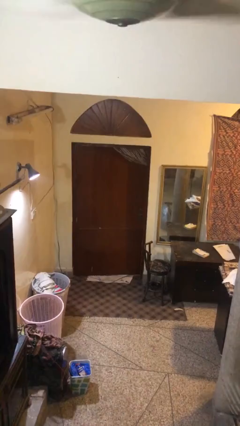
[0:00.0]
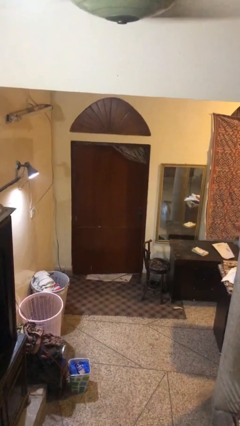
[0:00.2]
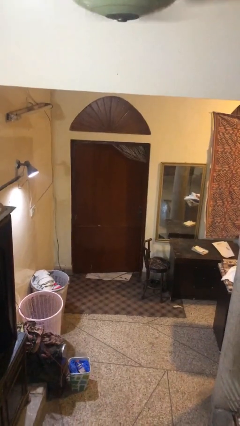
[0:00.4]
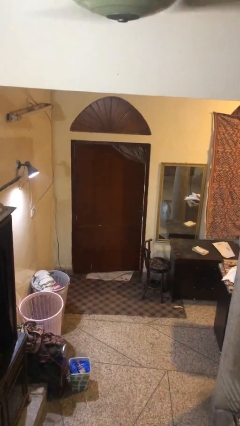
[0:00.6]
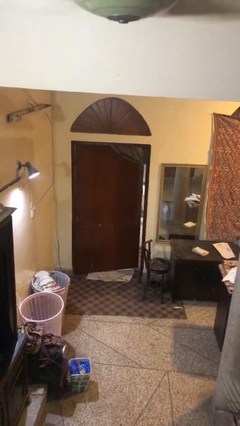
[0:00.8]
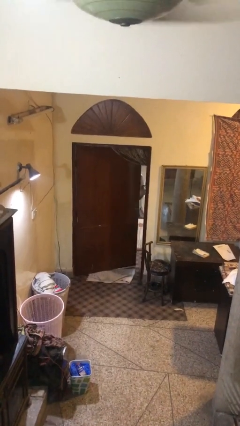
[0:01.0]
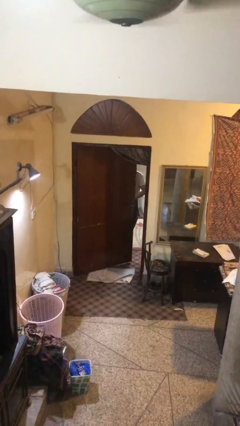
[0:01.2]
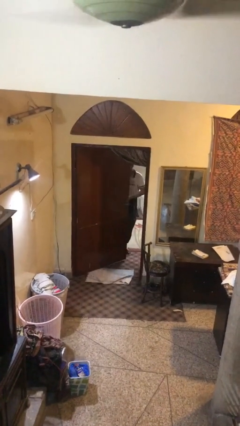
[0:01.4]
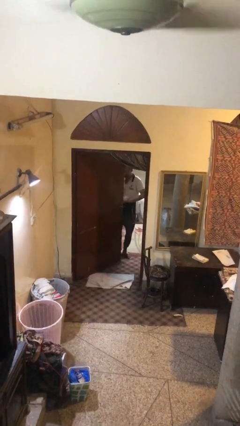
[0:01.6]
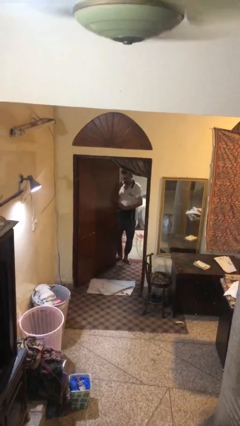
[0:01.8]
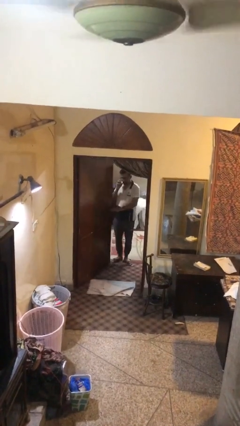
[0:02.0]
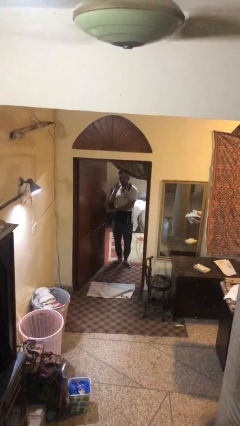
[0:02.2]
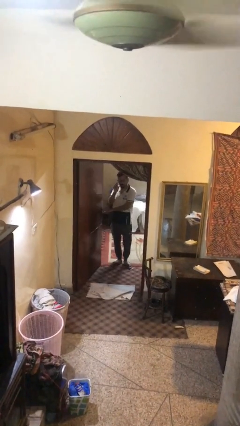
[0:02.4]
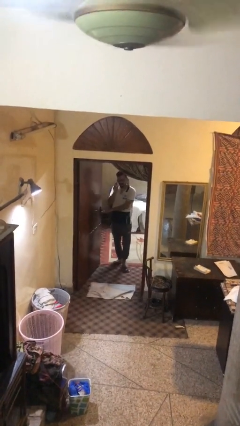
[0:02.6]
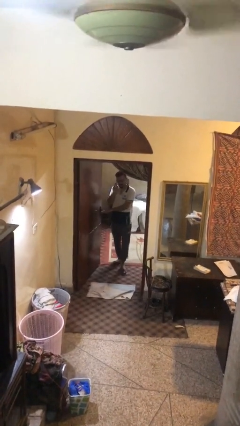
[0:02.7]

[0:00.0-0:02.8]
person opens facility door

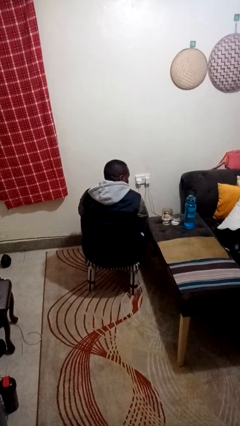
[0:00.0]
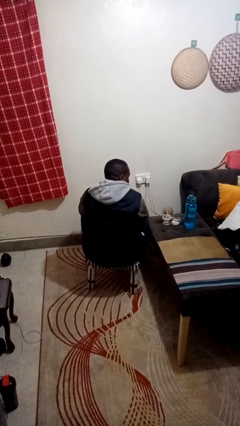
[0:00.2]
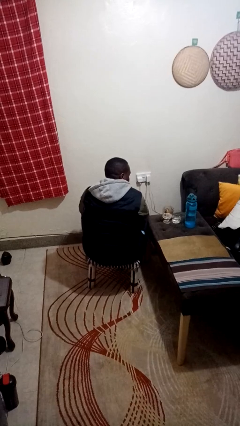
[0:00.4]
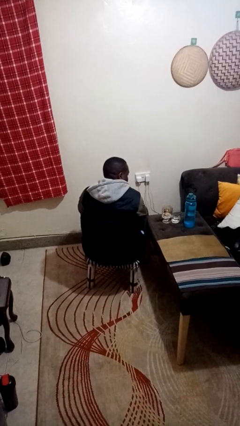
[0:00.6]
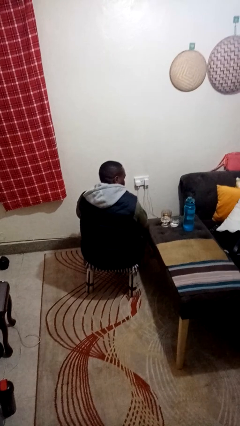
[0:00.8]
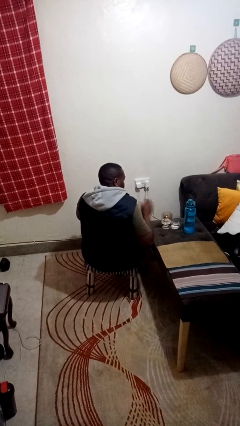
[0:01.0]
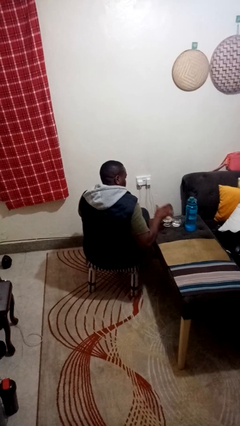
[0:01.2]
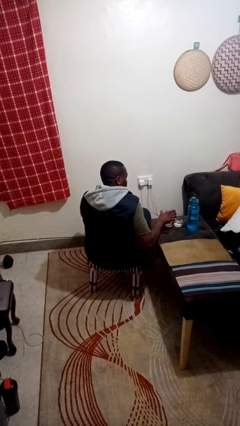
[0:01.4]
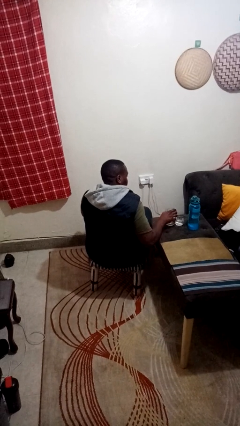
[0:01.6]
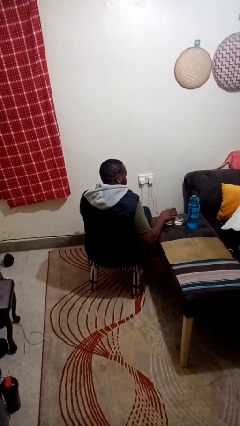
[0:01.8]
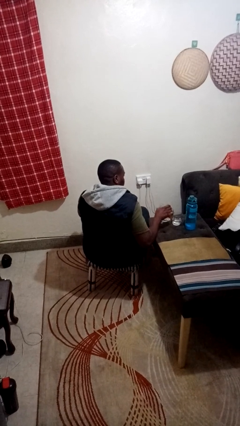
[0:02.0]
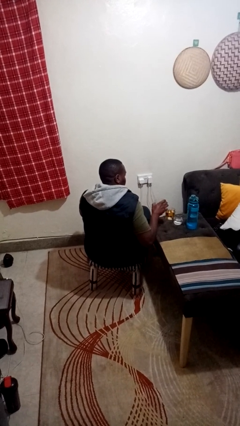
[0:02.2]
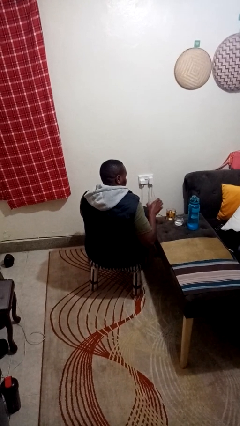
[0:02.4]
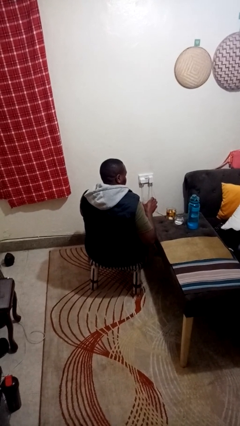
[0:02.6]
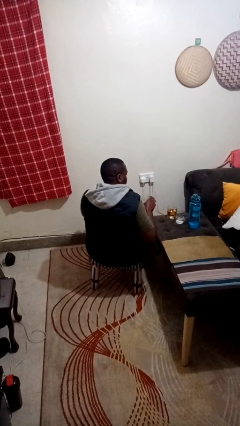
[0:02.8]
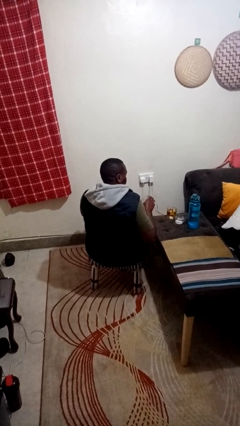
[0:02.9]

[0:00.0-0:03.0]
person picks up object from table

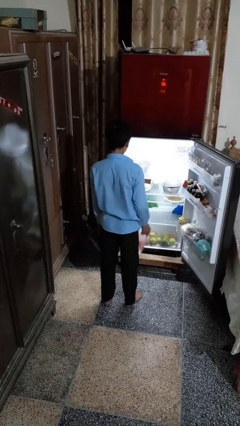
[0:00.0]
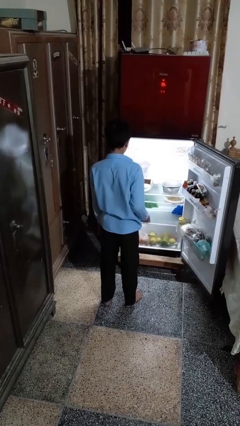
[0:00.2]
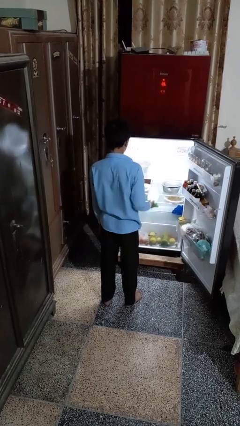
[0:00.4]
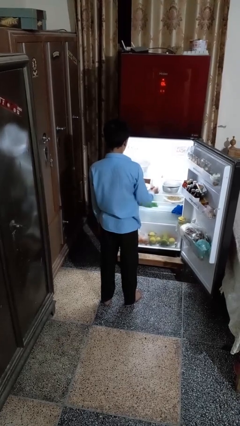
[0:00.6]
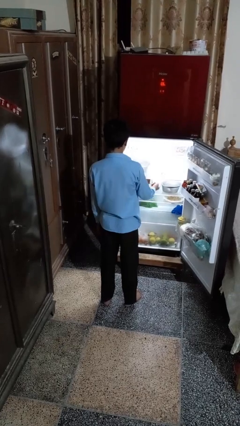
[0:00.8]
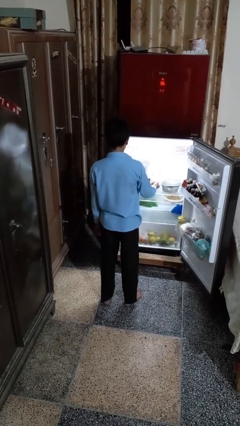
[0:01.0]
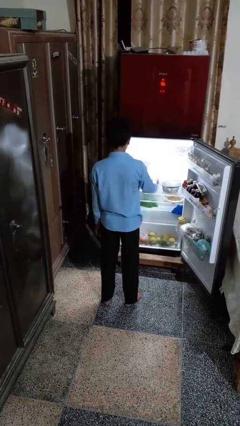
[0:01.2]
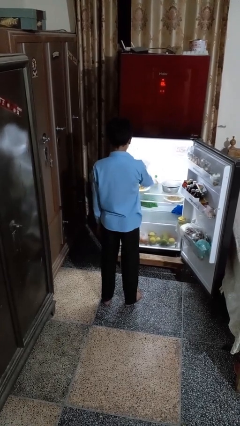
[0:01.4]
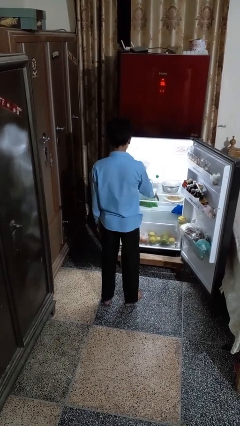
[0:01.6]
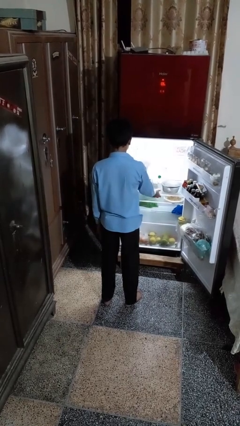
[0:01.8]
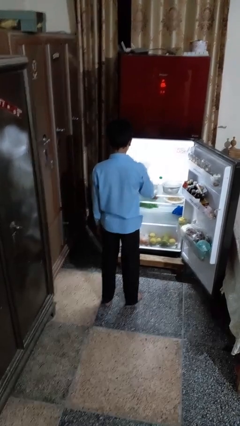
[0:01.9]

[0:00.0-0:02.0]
person puts object into refrigerator

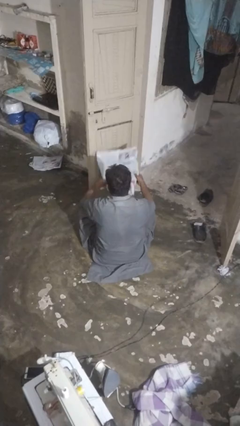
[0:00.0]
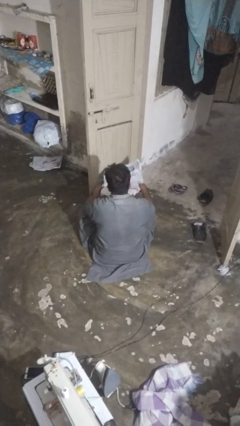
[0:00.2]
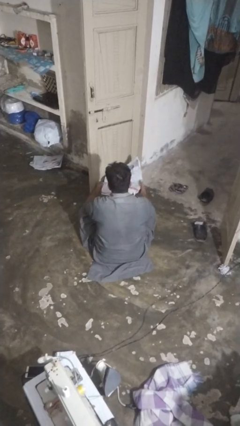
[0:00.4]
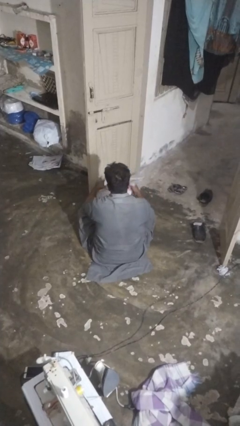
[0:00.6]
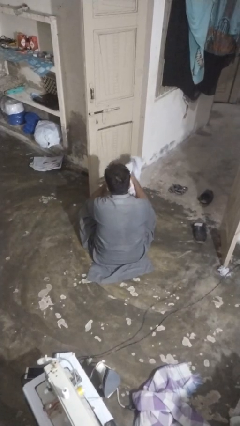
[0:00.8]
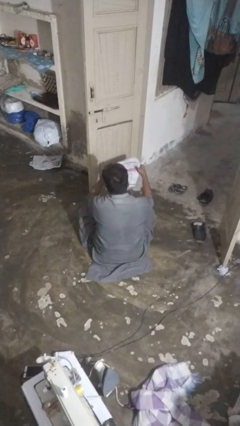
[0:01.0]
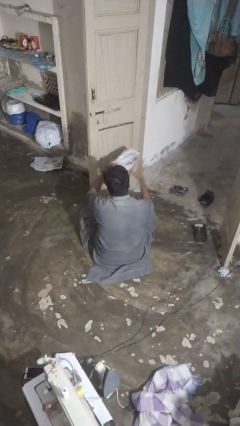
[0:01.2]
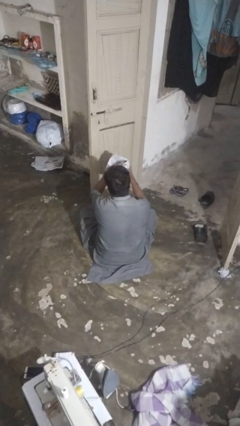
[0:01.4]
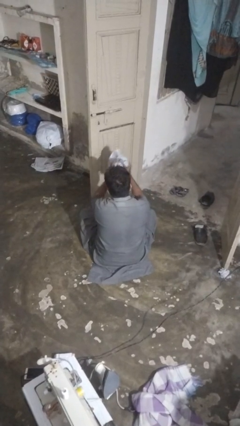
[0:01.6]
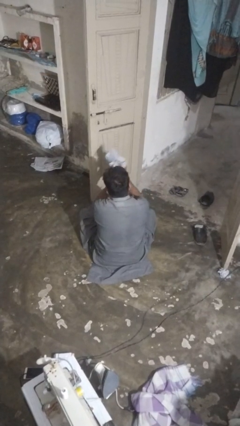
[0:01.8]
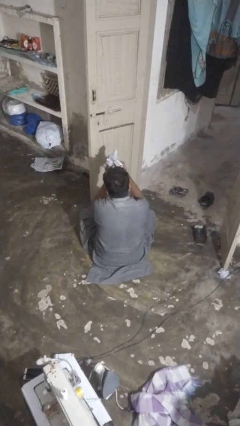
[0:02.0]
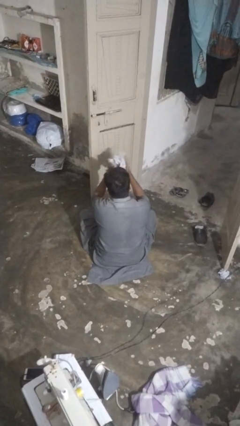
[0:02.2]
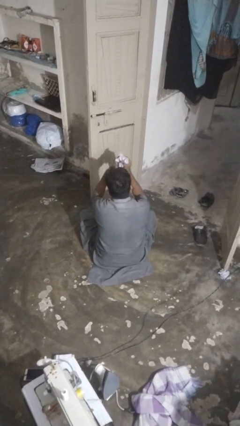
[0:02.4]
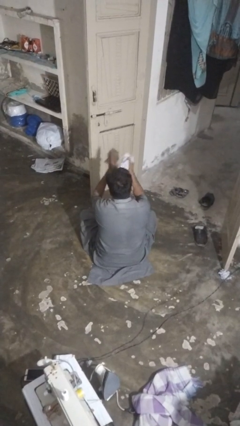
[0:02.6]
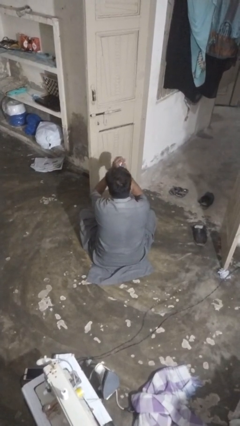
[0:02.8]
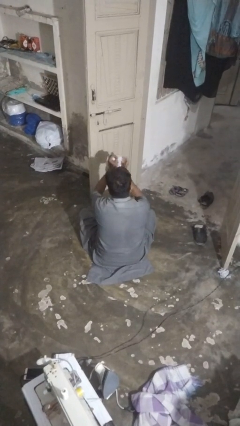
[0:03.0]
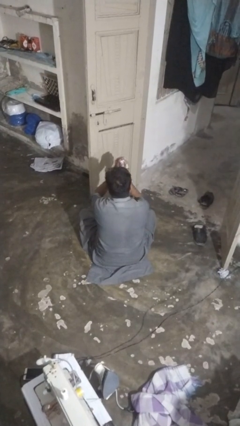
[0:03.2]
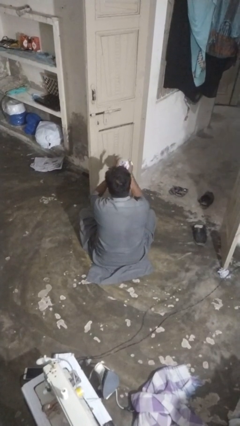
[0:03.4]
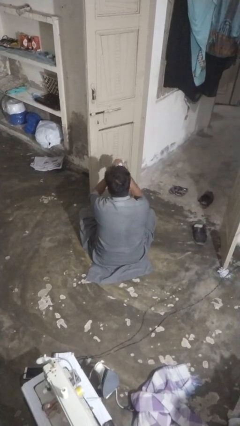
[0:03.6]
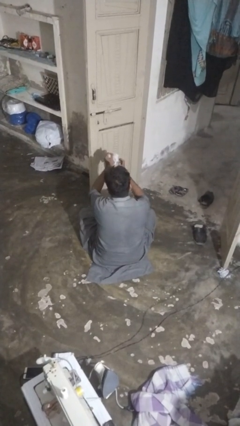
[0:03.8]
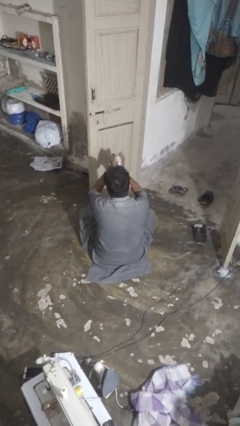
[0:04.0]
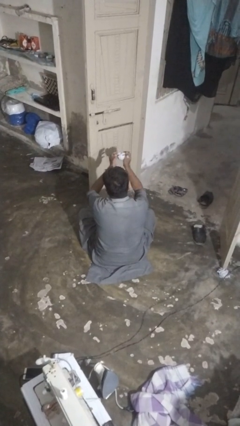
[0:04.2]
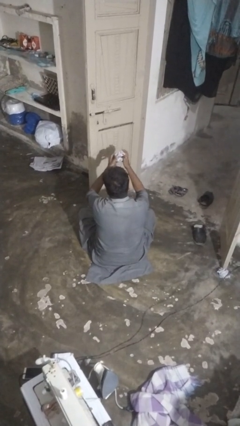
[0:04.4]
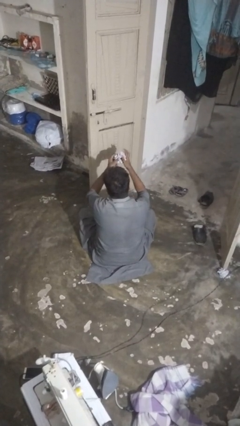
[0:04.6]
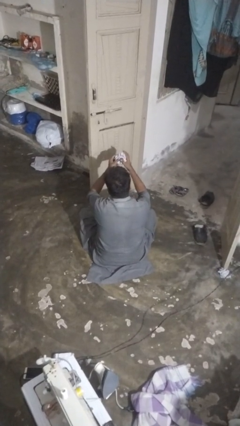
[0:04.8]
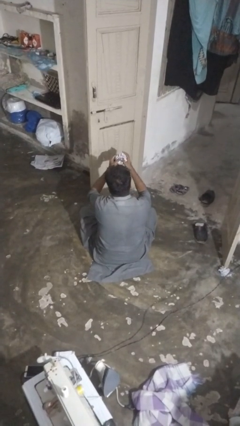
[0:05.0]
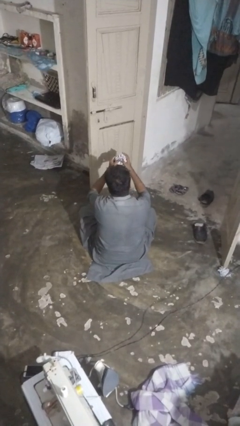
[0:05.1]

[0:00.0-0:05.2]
person crumples paper

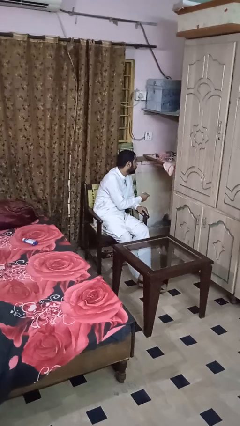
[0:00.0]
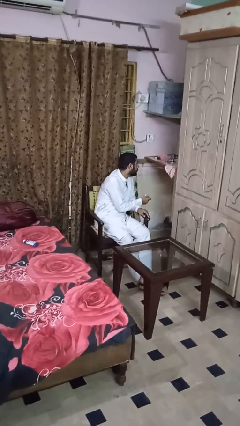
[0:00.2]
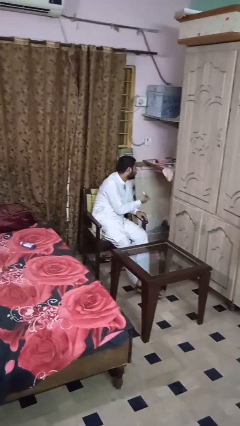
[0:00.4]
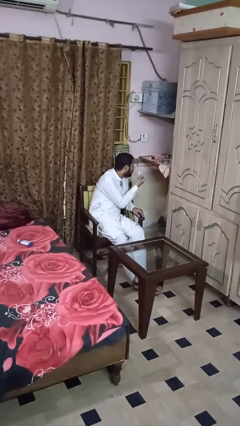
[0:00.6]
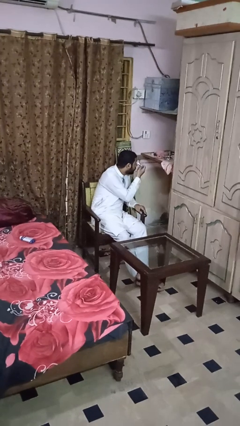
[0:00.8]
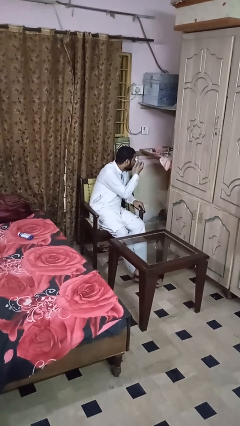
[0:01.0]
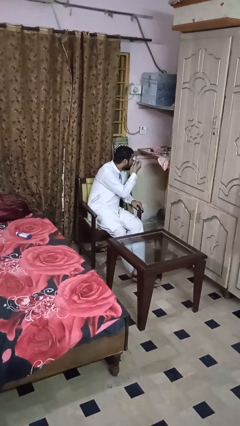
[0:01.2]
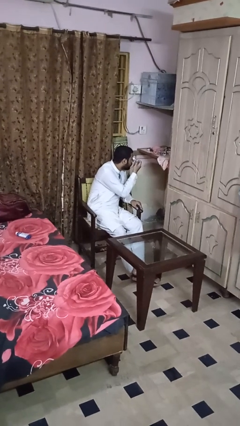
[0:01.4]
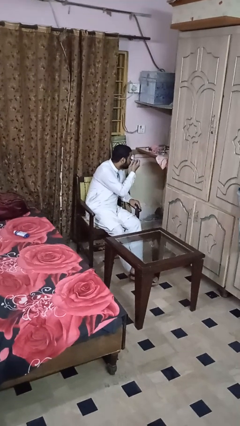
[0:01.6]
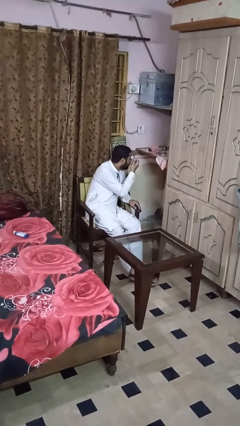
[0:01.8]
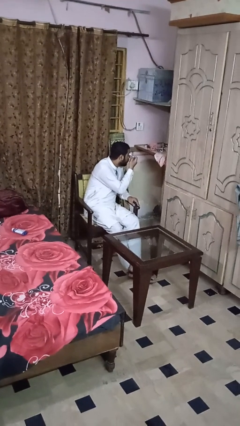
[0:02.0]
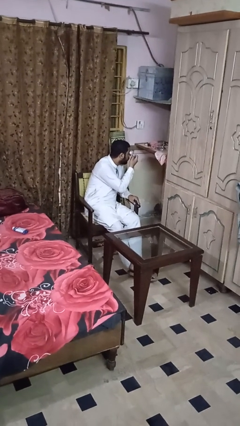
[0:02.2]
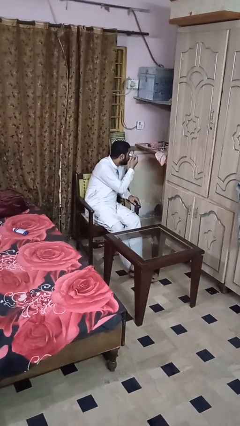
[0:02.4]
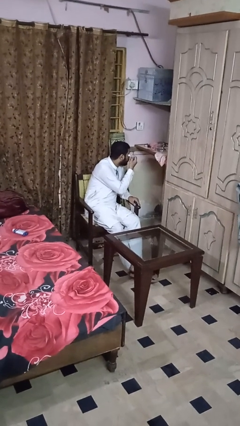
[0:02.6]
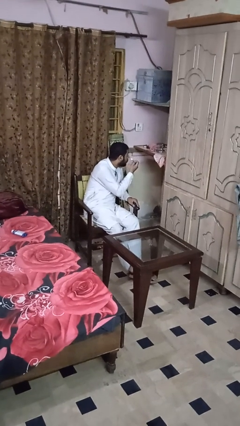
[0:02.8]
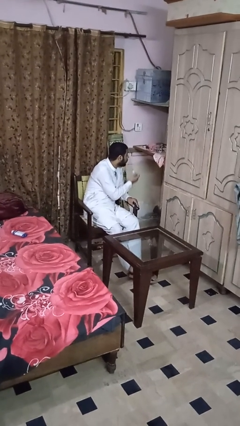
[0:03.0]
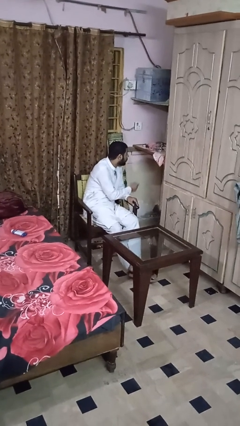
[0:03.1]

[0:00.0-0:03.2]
person applies eye makeup

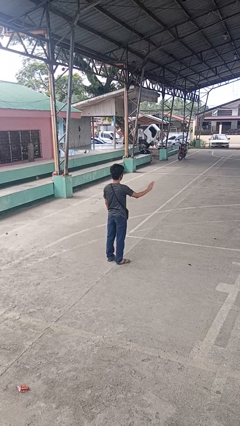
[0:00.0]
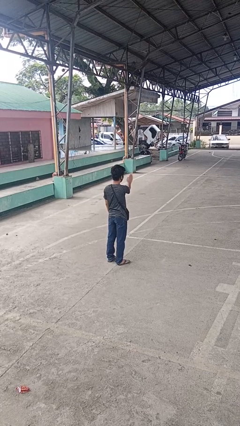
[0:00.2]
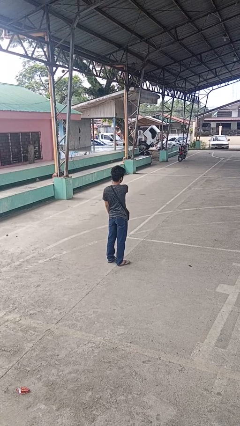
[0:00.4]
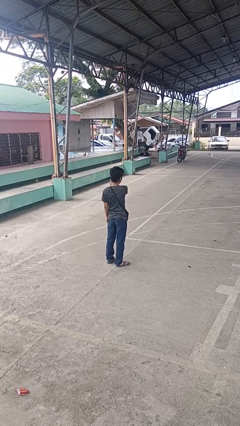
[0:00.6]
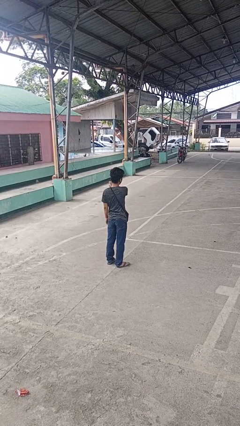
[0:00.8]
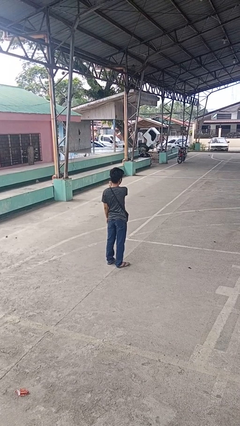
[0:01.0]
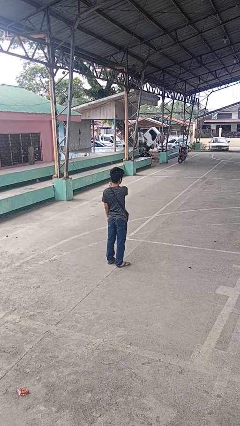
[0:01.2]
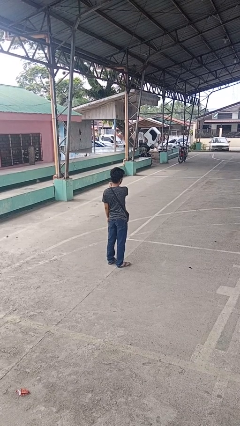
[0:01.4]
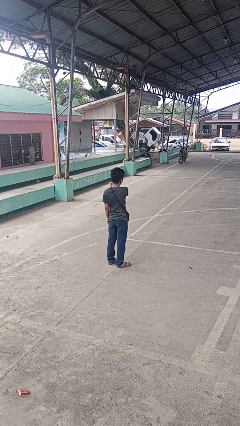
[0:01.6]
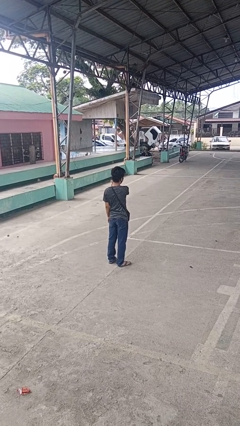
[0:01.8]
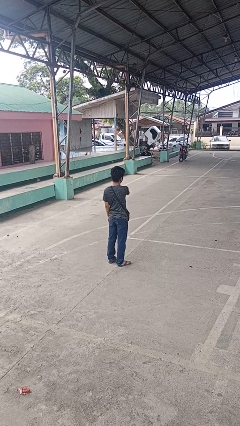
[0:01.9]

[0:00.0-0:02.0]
person gestures swipe left
